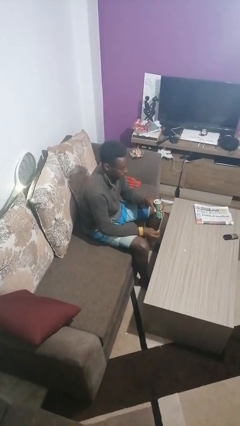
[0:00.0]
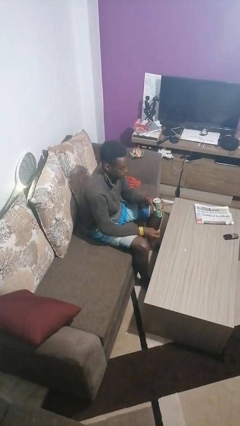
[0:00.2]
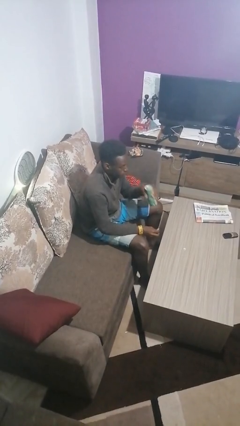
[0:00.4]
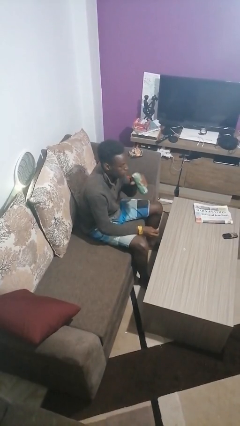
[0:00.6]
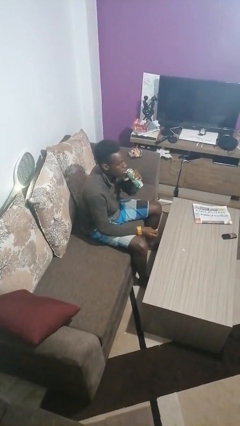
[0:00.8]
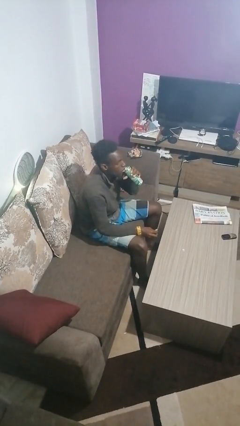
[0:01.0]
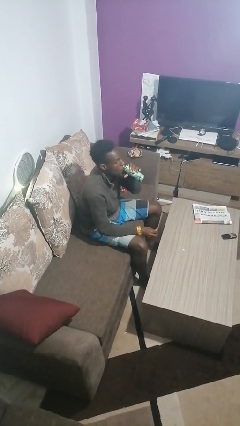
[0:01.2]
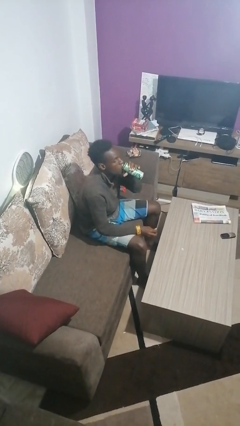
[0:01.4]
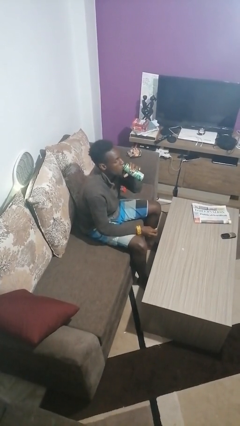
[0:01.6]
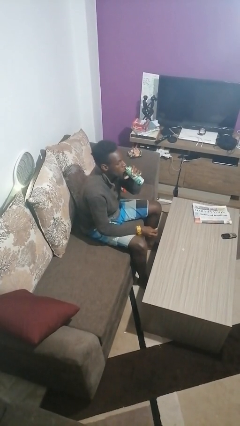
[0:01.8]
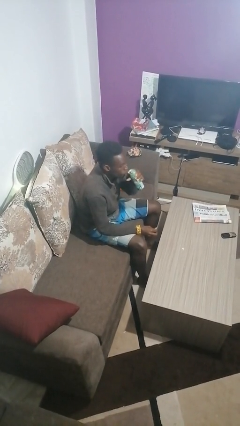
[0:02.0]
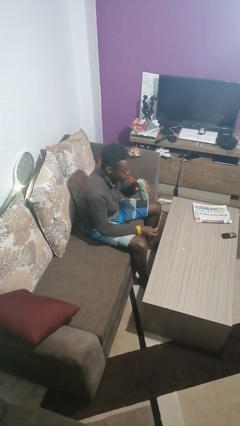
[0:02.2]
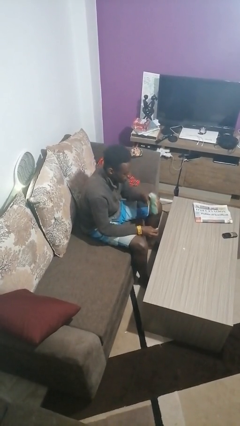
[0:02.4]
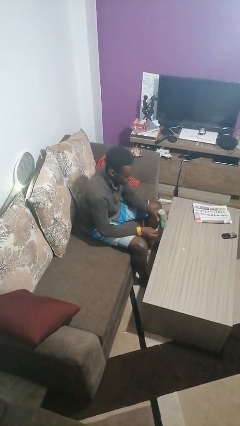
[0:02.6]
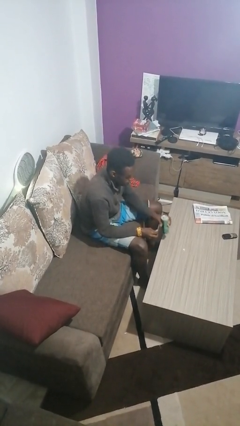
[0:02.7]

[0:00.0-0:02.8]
person drinks from beverage can

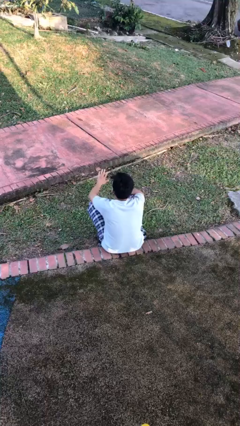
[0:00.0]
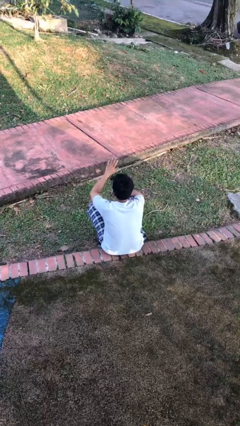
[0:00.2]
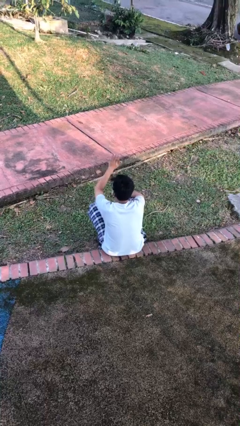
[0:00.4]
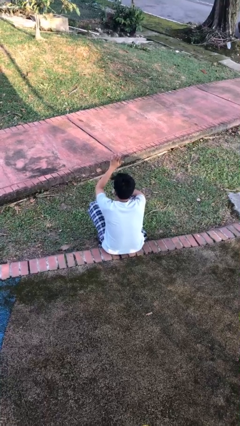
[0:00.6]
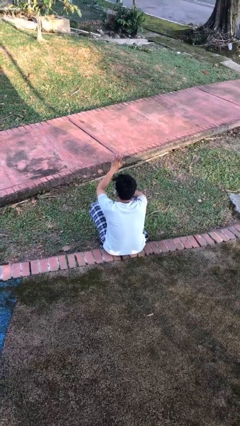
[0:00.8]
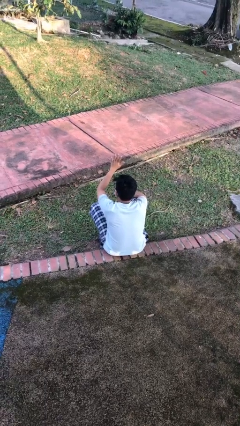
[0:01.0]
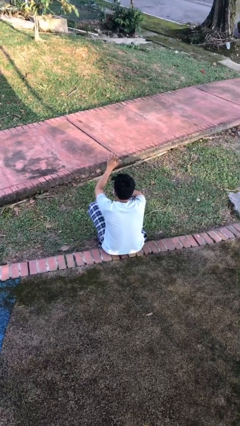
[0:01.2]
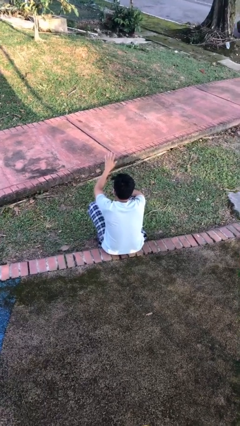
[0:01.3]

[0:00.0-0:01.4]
person gestures stop

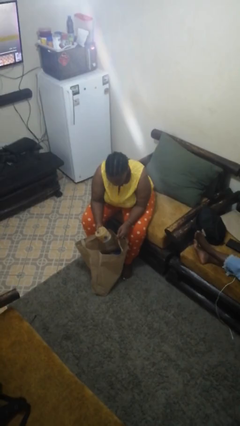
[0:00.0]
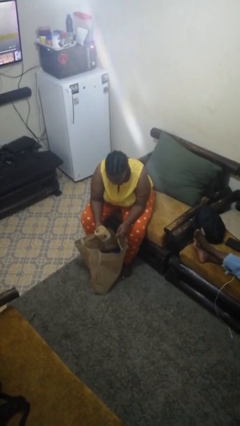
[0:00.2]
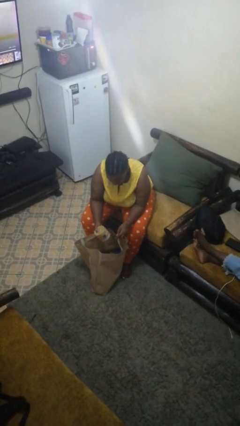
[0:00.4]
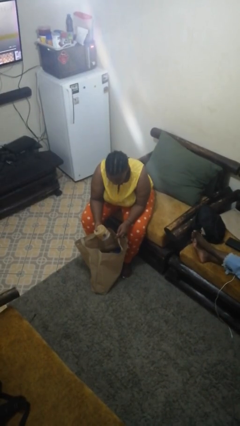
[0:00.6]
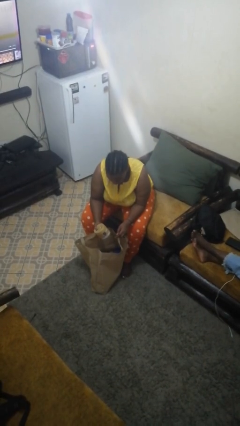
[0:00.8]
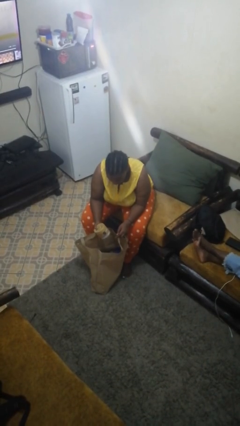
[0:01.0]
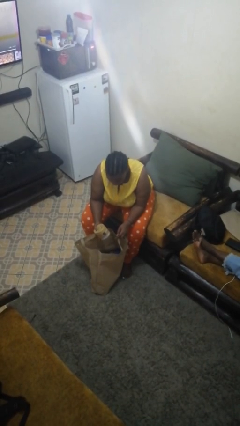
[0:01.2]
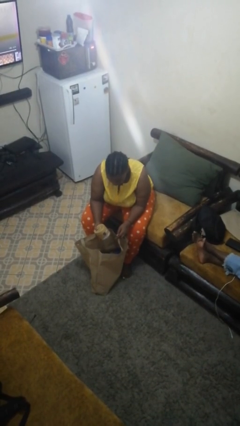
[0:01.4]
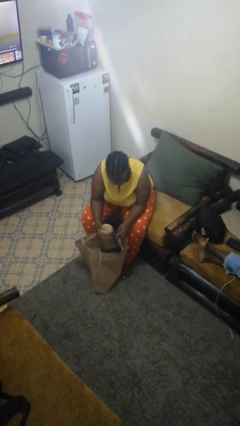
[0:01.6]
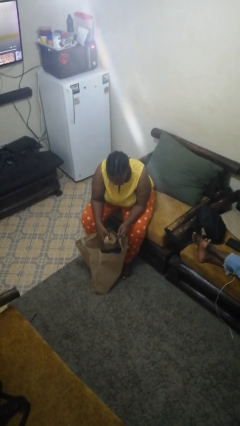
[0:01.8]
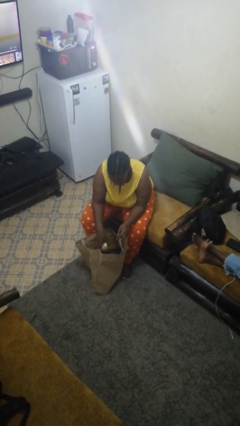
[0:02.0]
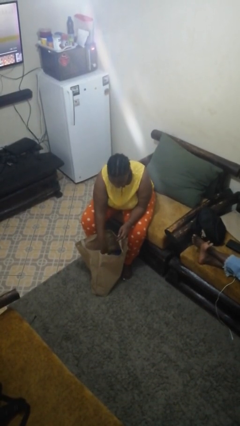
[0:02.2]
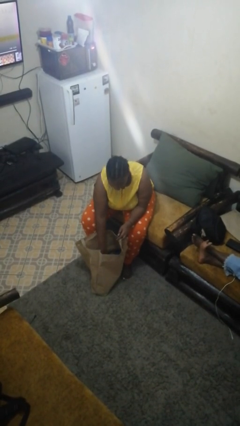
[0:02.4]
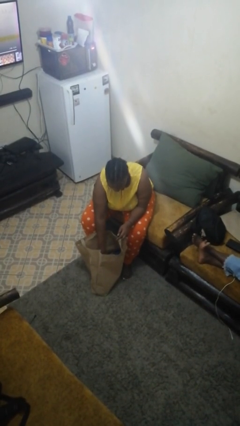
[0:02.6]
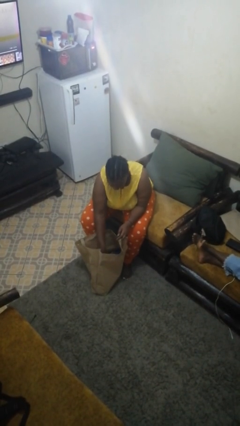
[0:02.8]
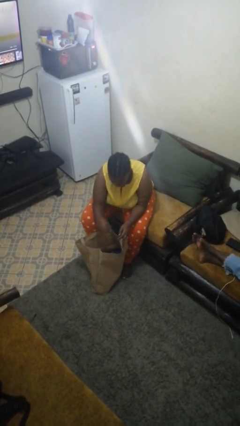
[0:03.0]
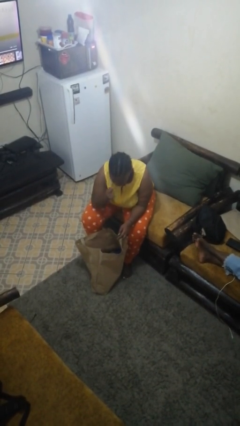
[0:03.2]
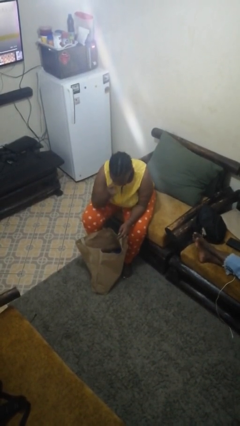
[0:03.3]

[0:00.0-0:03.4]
person puts object into bag

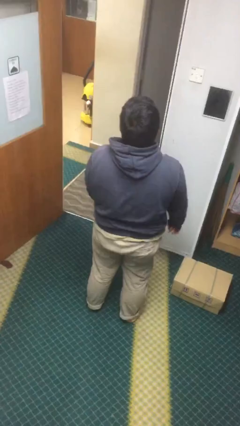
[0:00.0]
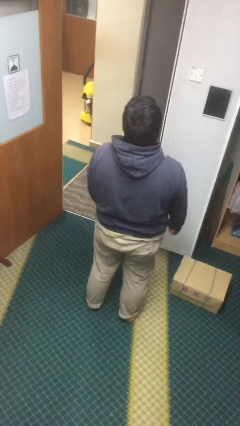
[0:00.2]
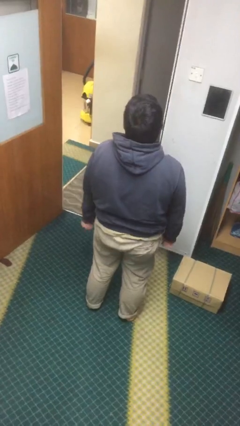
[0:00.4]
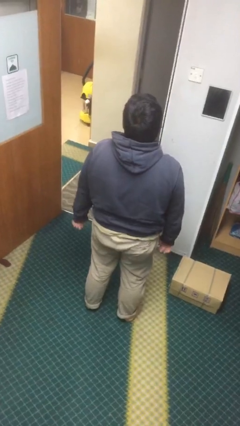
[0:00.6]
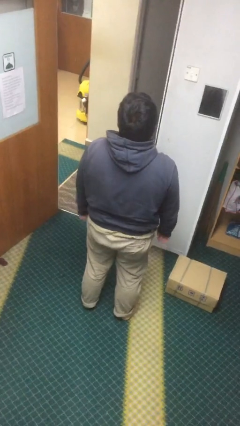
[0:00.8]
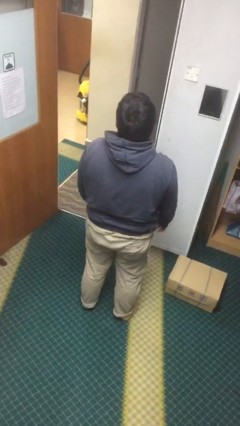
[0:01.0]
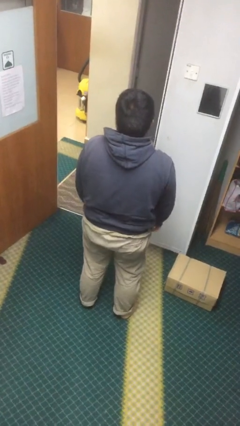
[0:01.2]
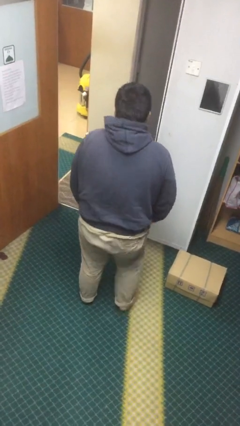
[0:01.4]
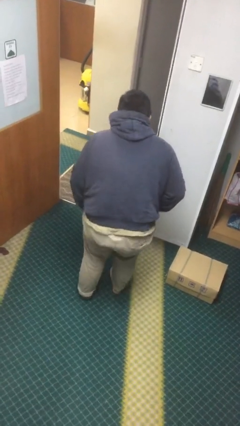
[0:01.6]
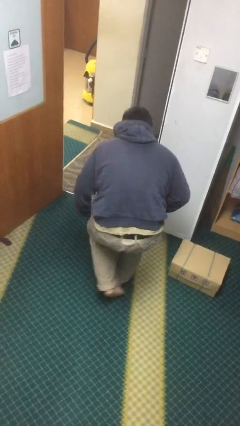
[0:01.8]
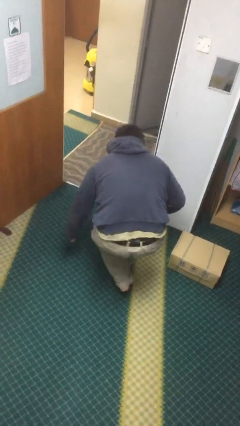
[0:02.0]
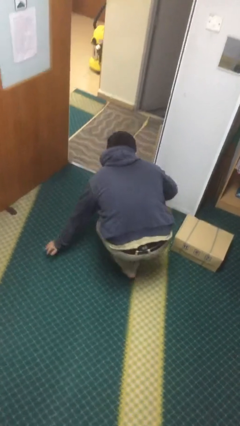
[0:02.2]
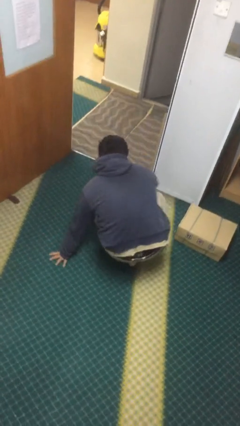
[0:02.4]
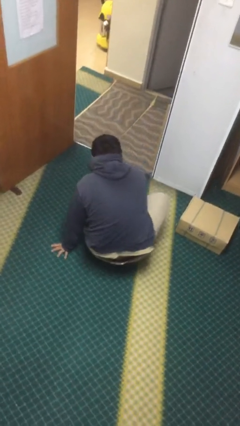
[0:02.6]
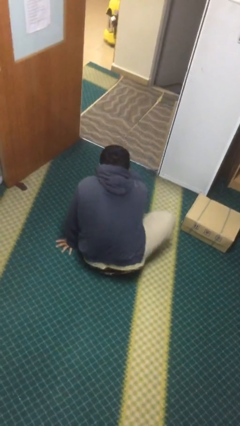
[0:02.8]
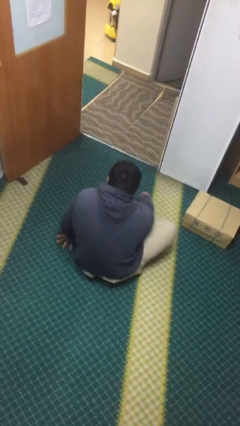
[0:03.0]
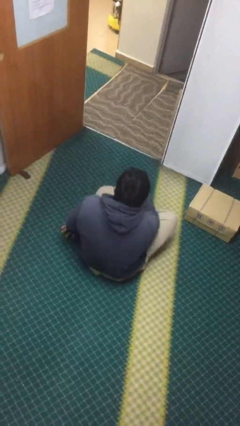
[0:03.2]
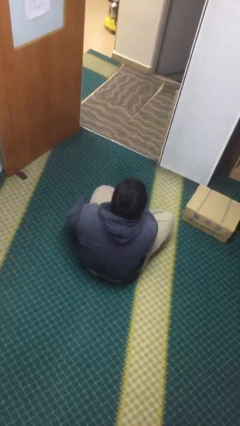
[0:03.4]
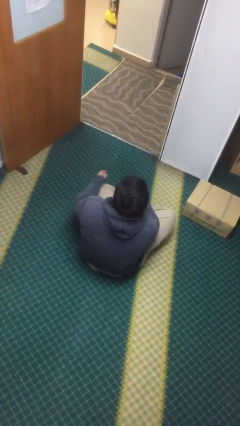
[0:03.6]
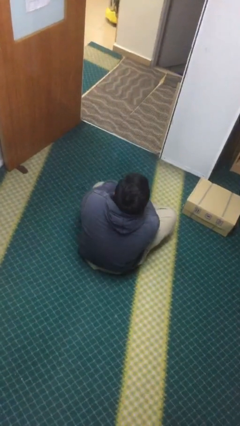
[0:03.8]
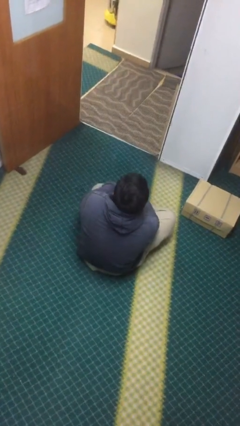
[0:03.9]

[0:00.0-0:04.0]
person sits crisscross

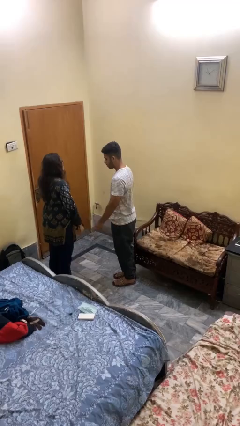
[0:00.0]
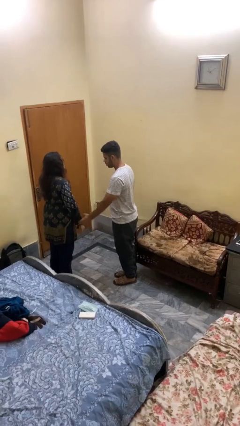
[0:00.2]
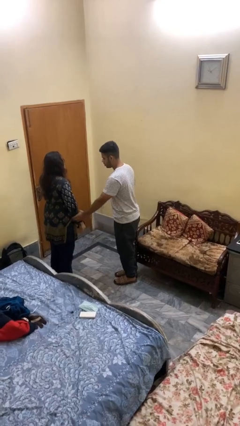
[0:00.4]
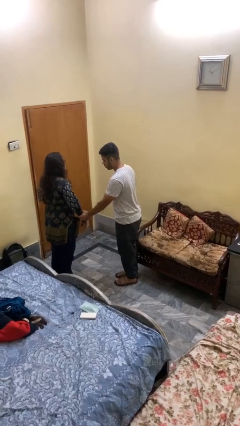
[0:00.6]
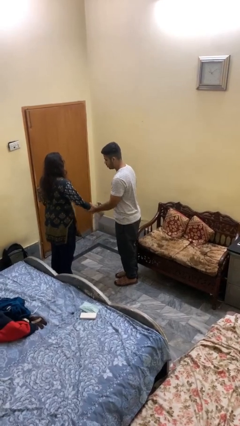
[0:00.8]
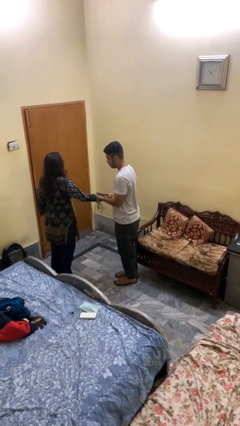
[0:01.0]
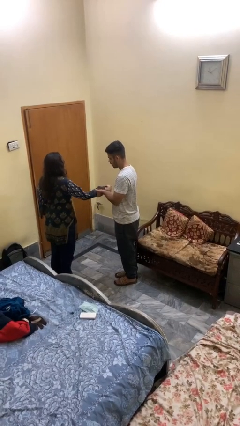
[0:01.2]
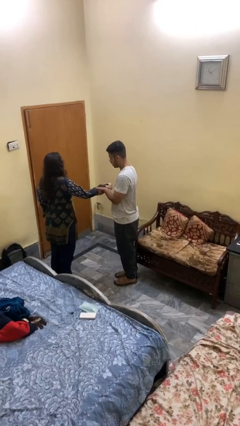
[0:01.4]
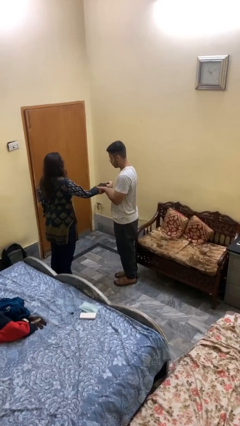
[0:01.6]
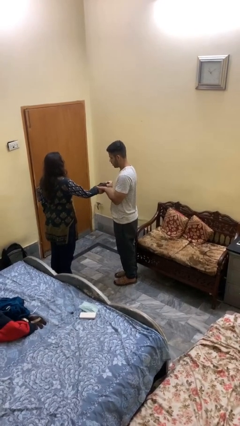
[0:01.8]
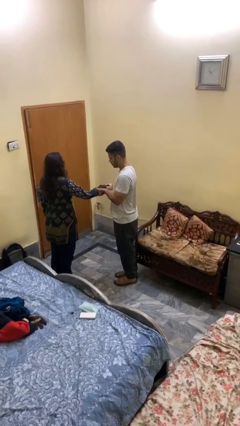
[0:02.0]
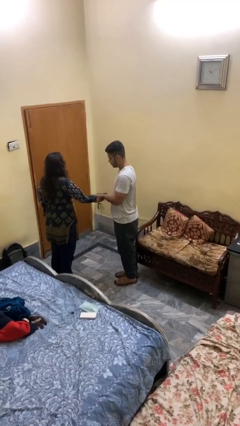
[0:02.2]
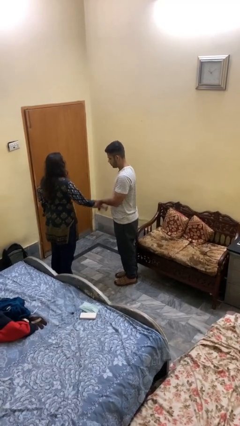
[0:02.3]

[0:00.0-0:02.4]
person grabs person by forearm

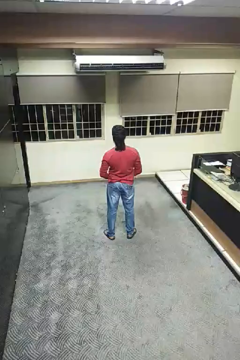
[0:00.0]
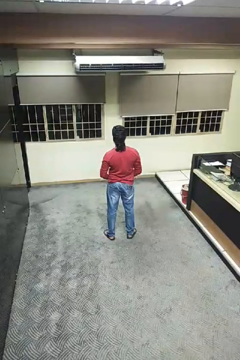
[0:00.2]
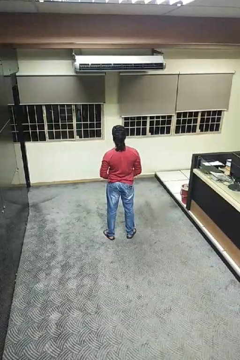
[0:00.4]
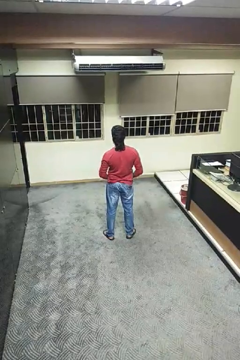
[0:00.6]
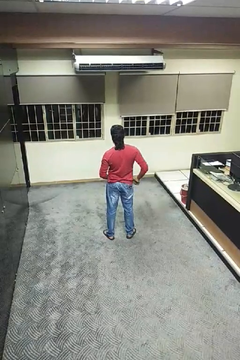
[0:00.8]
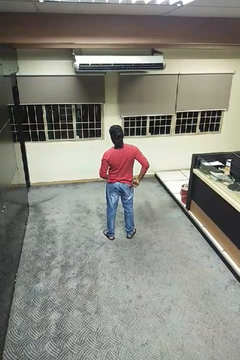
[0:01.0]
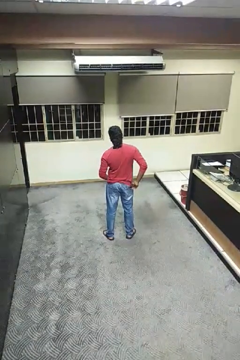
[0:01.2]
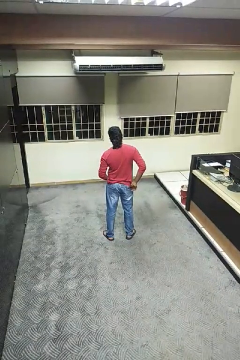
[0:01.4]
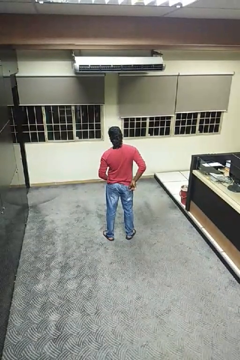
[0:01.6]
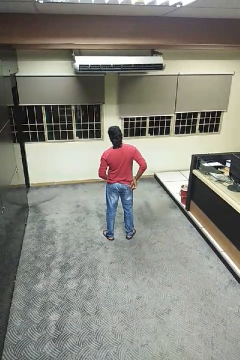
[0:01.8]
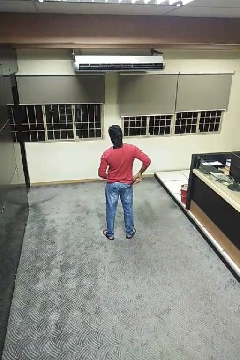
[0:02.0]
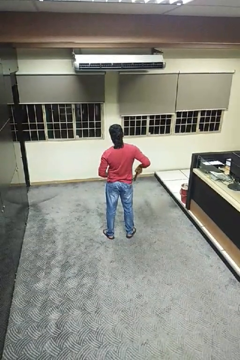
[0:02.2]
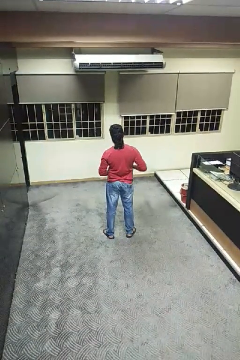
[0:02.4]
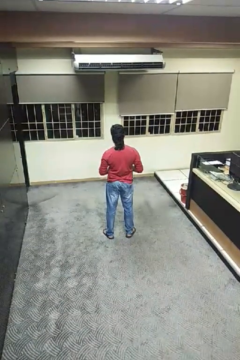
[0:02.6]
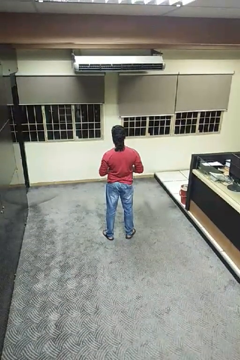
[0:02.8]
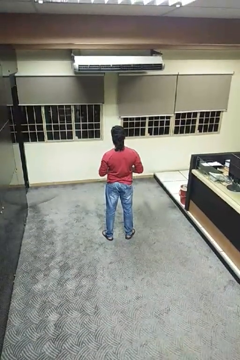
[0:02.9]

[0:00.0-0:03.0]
person takes phone from pocket

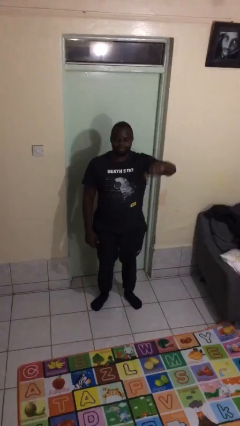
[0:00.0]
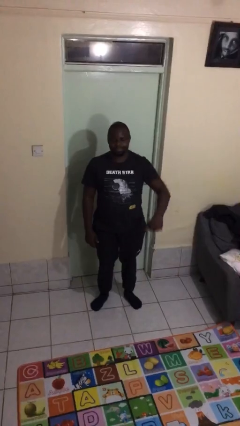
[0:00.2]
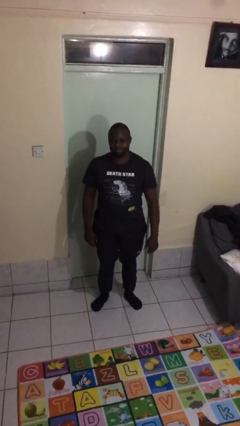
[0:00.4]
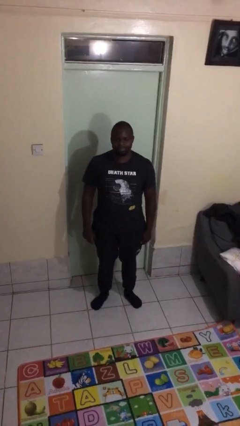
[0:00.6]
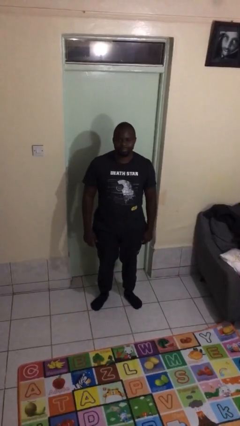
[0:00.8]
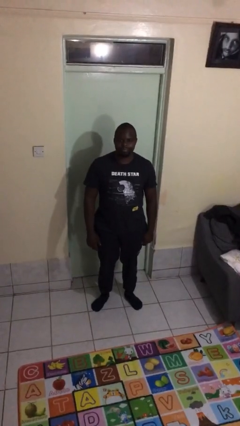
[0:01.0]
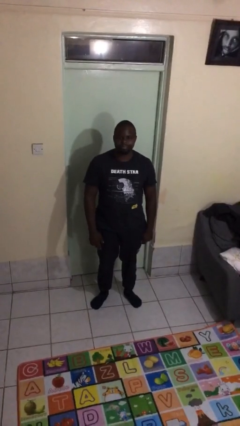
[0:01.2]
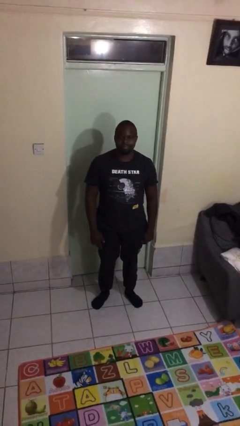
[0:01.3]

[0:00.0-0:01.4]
person gestures lower hand
